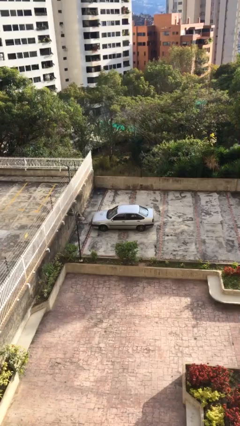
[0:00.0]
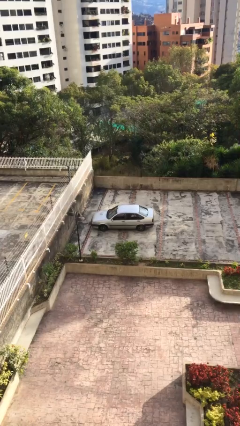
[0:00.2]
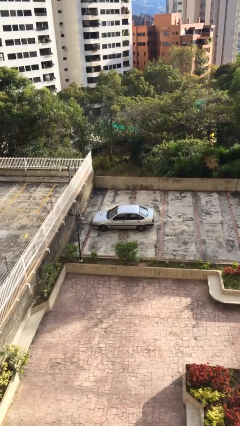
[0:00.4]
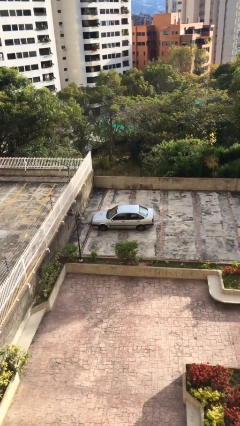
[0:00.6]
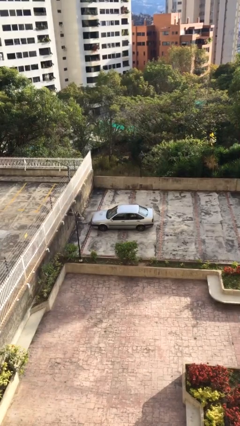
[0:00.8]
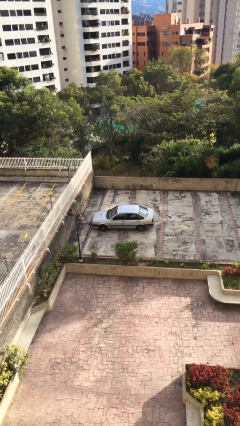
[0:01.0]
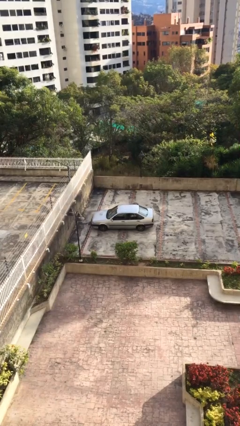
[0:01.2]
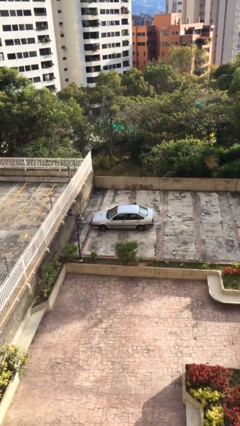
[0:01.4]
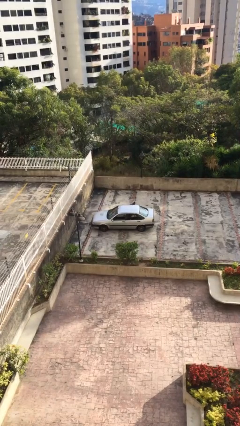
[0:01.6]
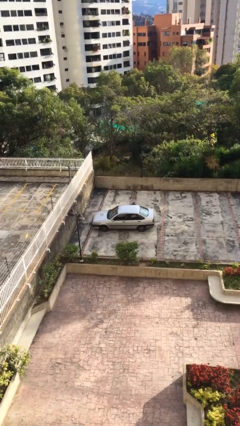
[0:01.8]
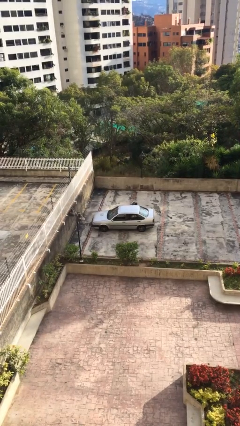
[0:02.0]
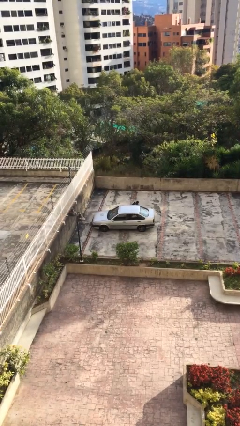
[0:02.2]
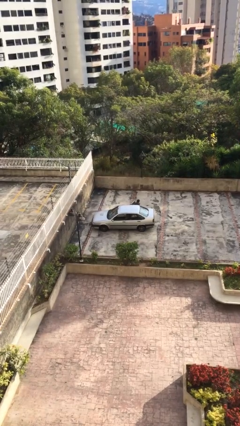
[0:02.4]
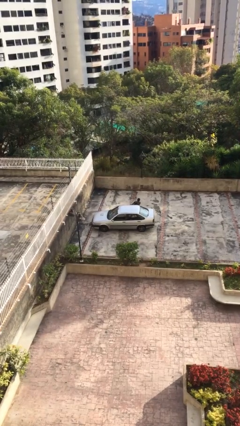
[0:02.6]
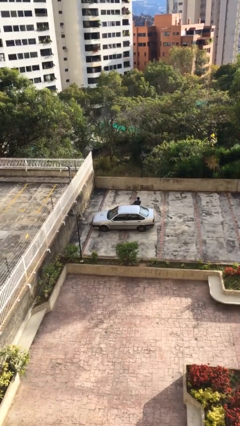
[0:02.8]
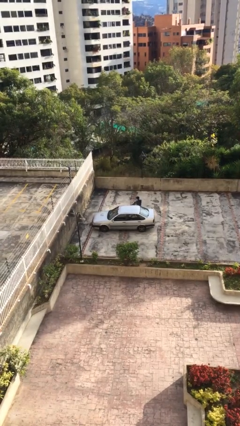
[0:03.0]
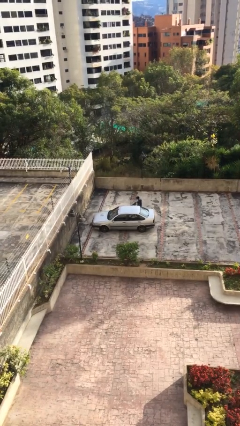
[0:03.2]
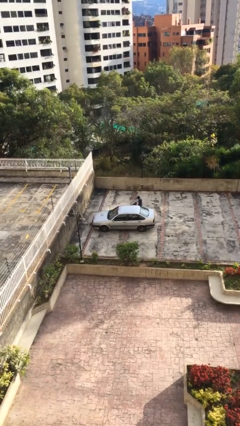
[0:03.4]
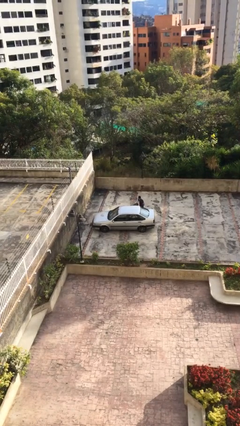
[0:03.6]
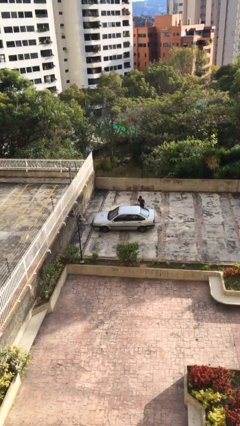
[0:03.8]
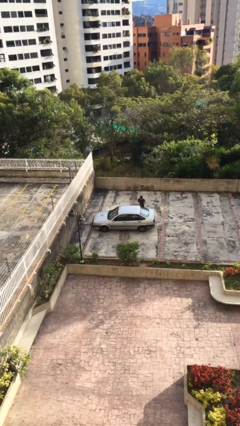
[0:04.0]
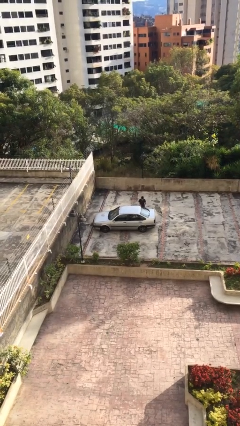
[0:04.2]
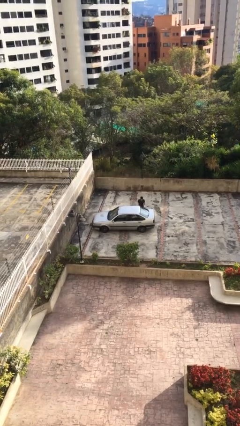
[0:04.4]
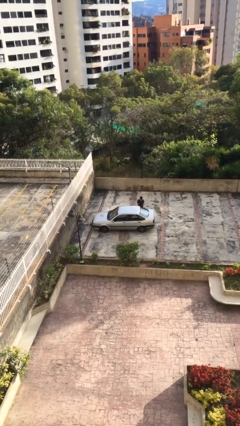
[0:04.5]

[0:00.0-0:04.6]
car drops off person

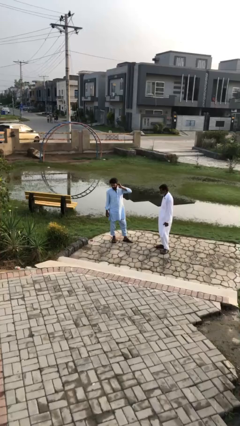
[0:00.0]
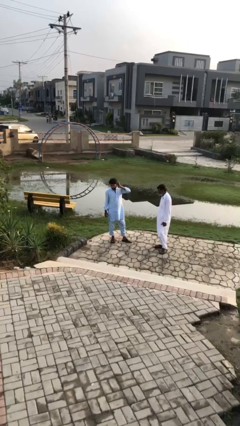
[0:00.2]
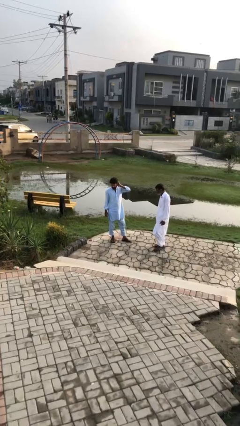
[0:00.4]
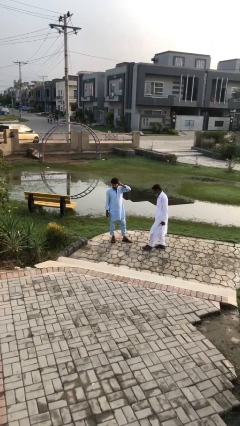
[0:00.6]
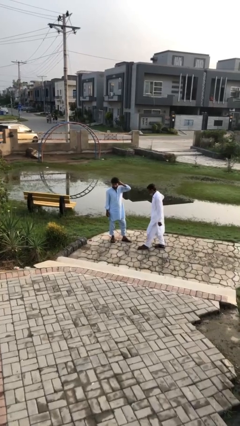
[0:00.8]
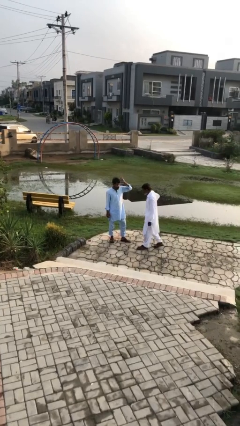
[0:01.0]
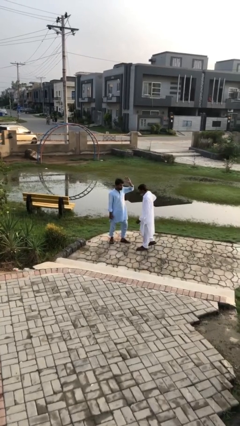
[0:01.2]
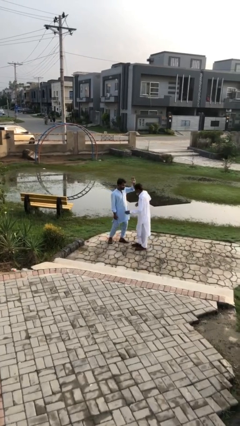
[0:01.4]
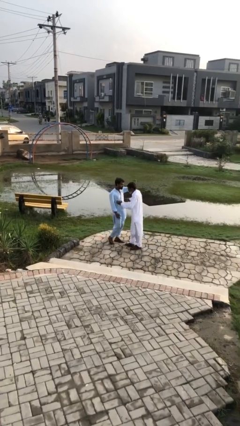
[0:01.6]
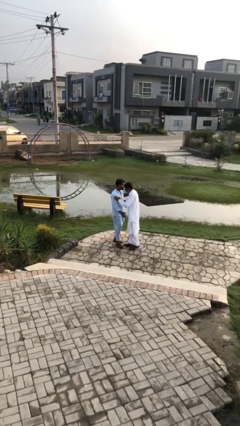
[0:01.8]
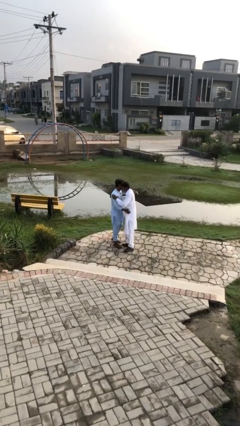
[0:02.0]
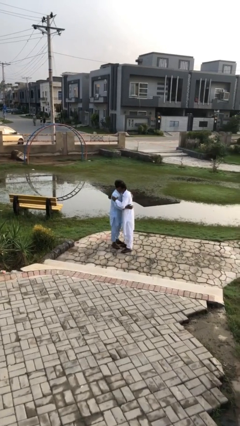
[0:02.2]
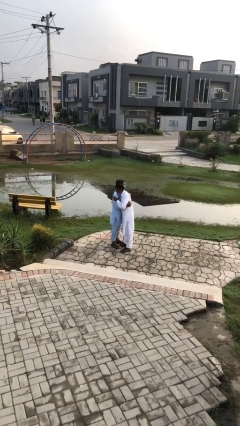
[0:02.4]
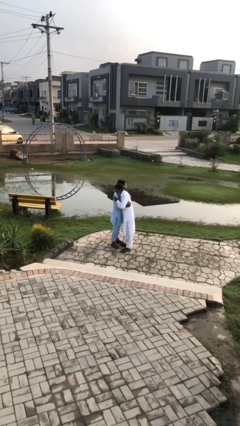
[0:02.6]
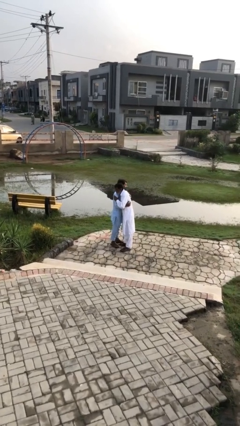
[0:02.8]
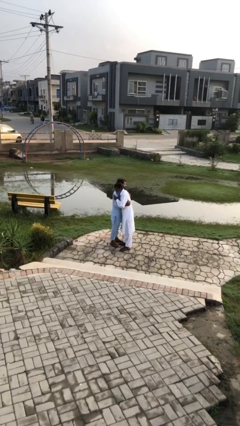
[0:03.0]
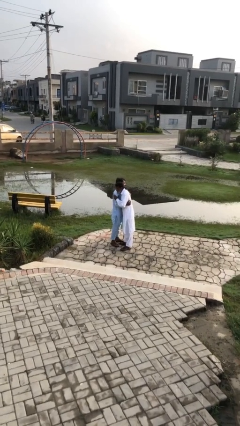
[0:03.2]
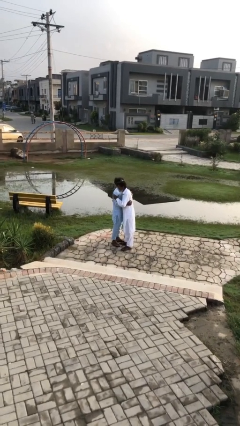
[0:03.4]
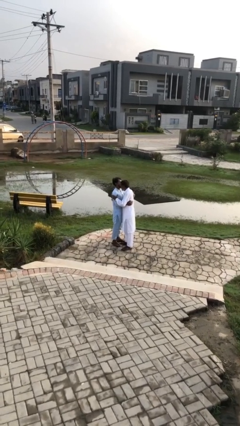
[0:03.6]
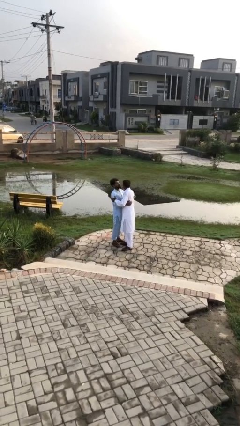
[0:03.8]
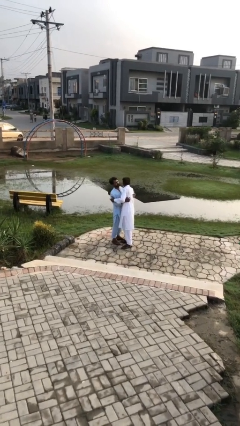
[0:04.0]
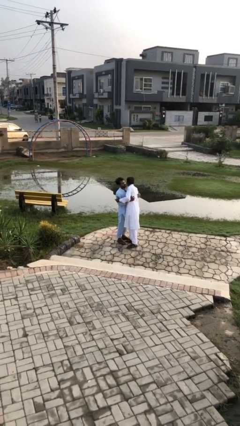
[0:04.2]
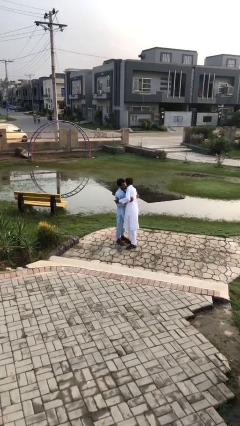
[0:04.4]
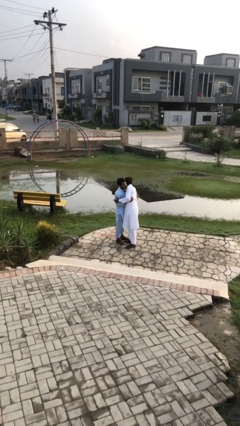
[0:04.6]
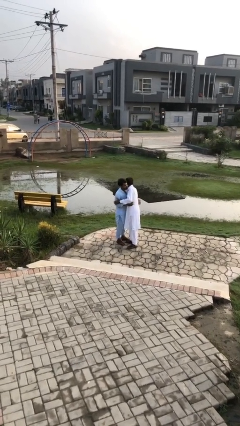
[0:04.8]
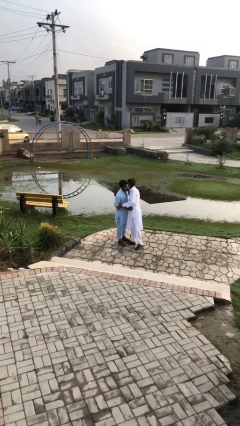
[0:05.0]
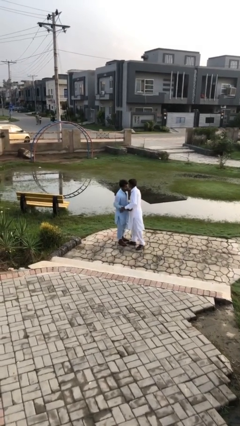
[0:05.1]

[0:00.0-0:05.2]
person embraces person

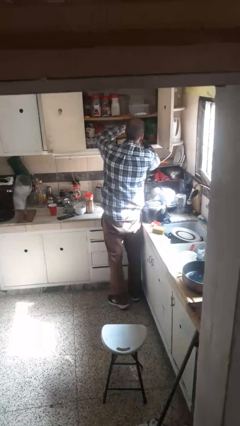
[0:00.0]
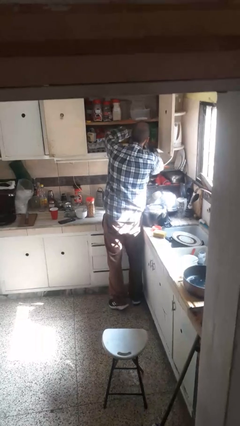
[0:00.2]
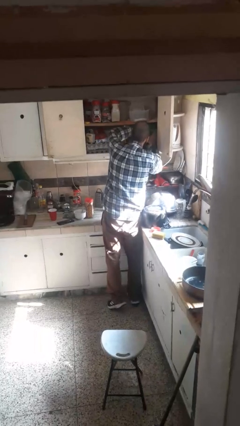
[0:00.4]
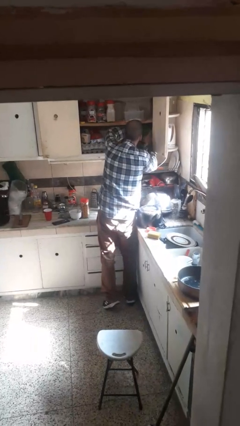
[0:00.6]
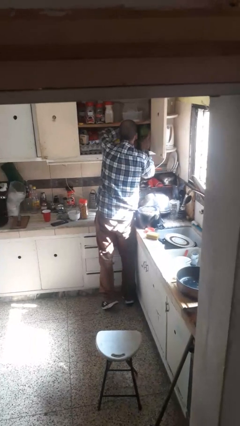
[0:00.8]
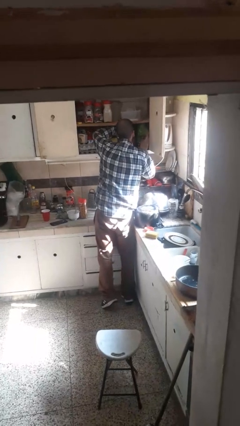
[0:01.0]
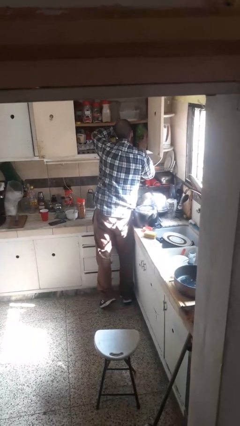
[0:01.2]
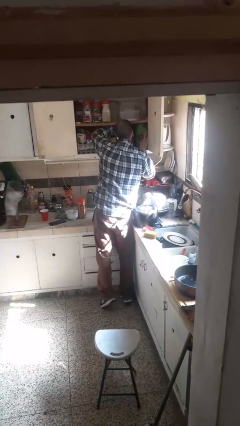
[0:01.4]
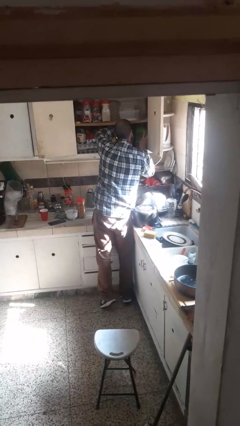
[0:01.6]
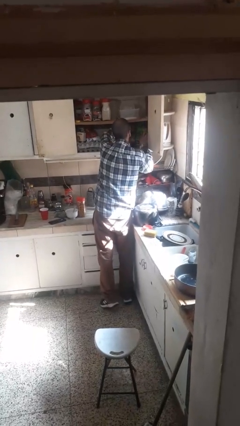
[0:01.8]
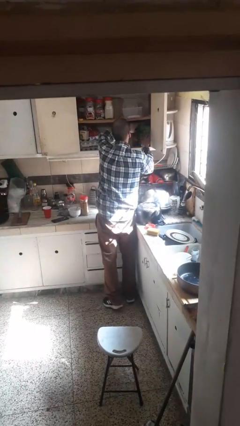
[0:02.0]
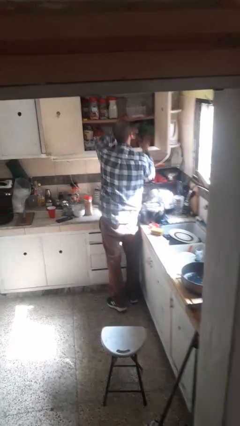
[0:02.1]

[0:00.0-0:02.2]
person searches in cabinet

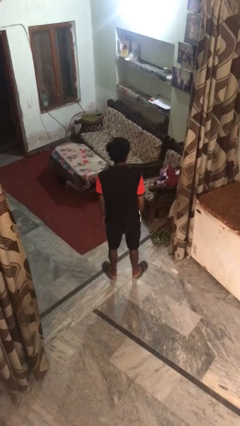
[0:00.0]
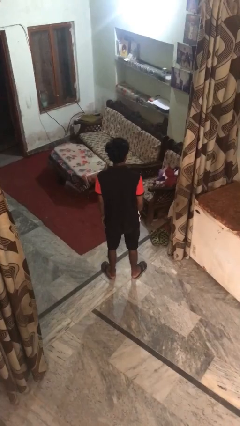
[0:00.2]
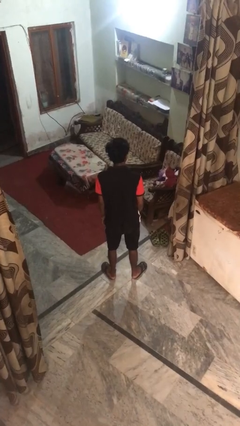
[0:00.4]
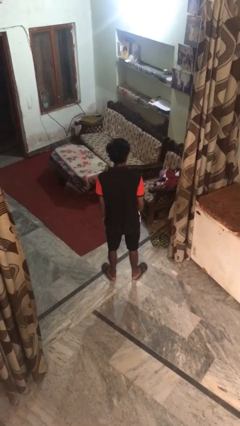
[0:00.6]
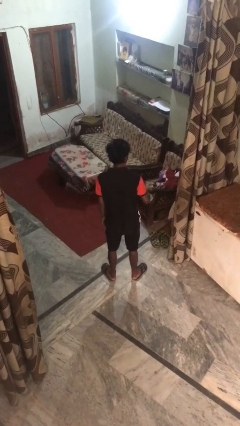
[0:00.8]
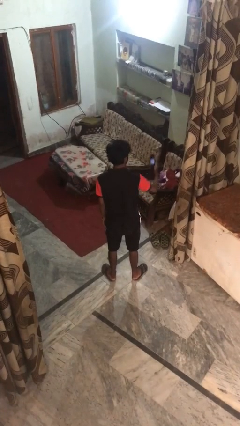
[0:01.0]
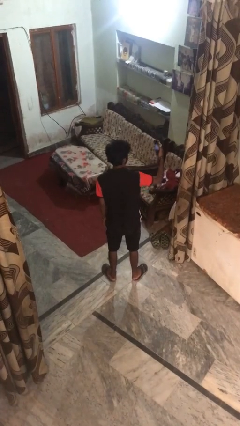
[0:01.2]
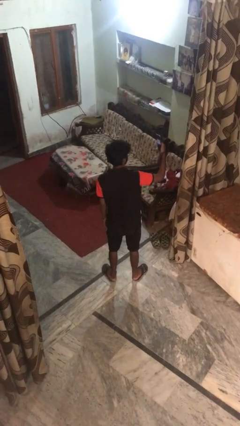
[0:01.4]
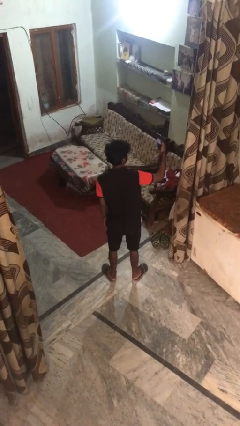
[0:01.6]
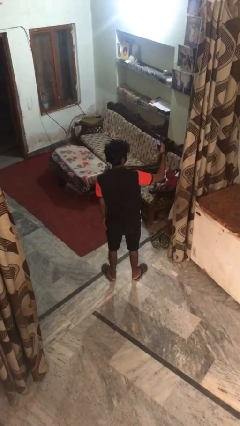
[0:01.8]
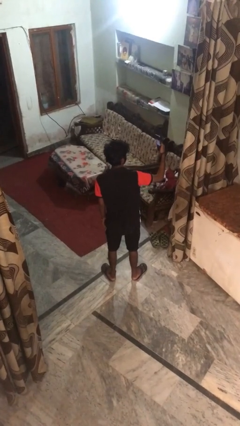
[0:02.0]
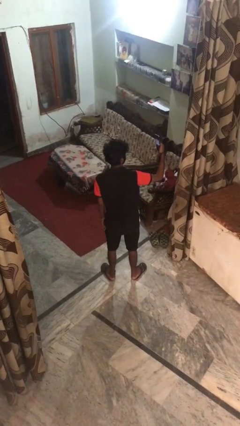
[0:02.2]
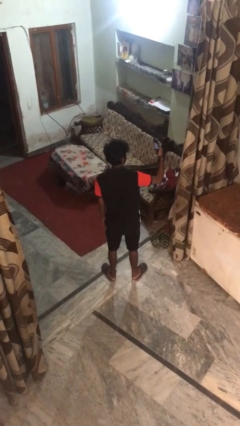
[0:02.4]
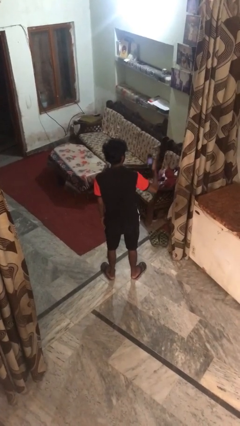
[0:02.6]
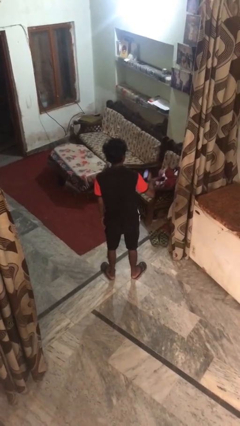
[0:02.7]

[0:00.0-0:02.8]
person takes selfie

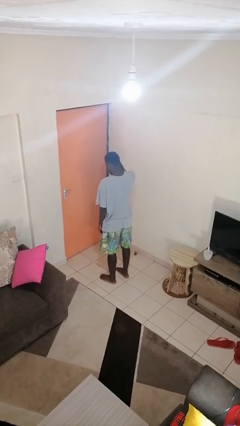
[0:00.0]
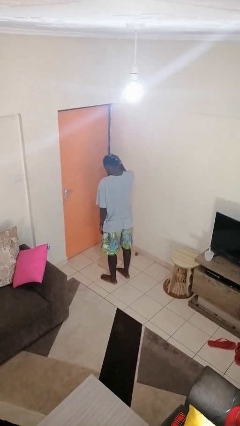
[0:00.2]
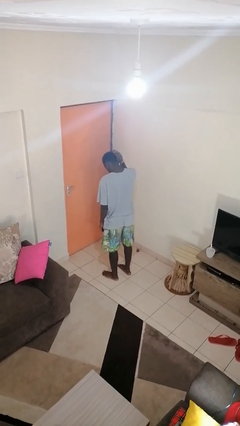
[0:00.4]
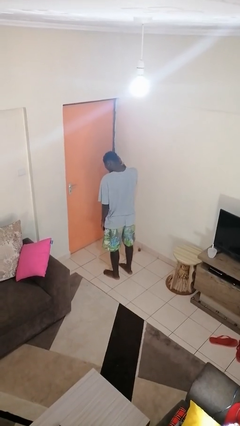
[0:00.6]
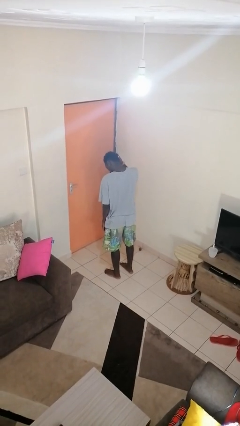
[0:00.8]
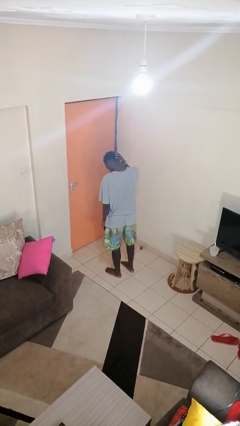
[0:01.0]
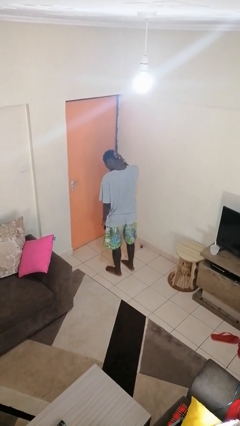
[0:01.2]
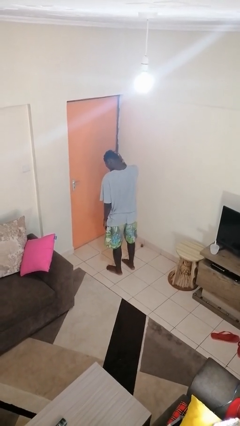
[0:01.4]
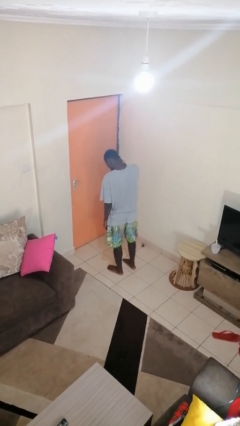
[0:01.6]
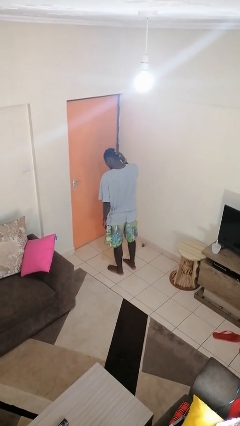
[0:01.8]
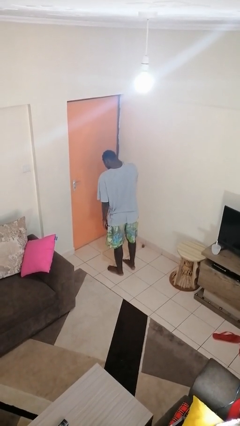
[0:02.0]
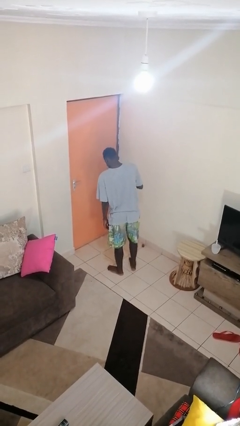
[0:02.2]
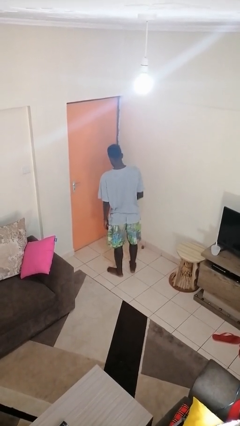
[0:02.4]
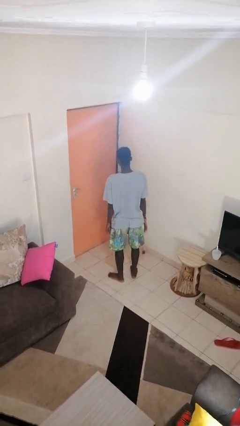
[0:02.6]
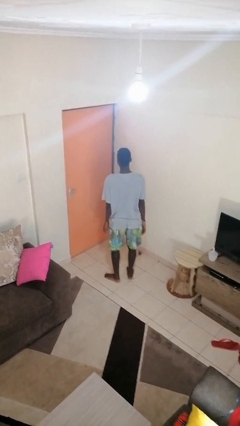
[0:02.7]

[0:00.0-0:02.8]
person strokes hair
